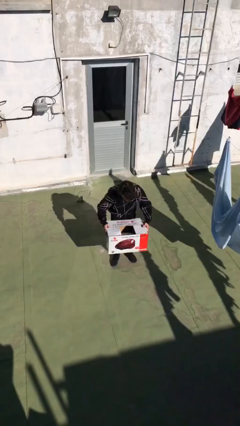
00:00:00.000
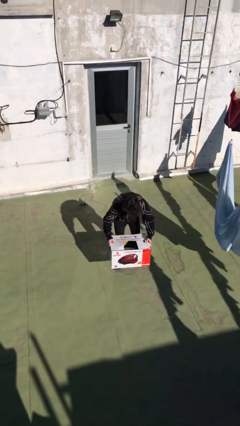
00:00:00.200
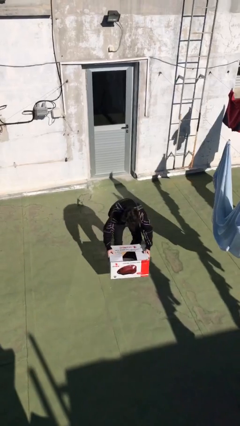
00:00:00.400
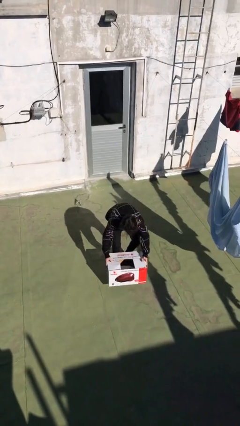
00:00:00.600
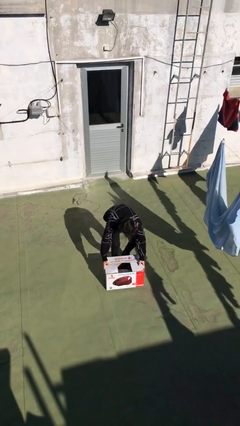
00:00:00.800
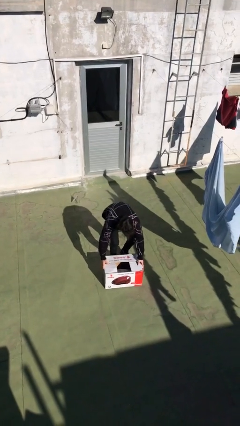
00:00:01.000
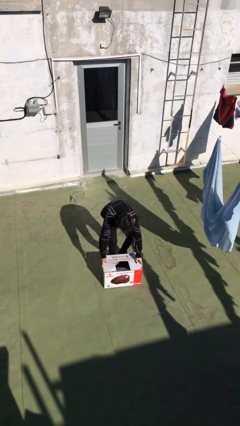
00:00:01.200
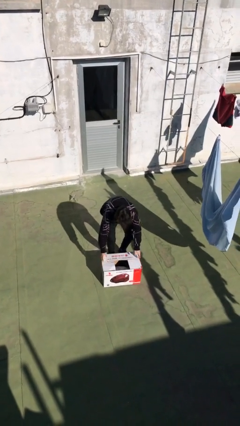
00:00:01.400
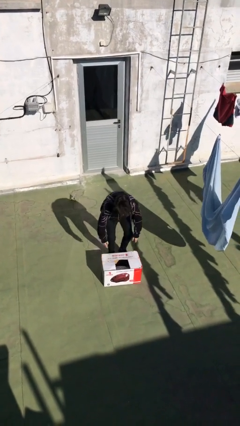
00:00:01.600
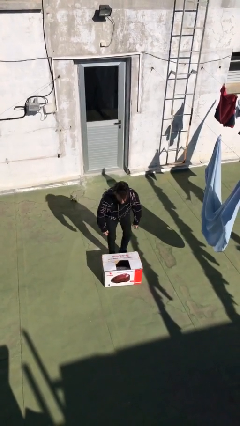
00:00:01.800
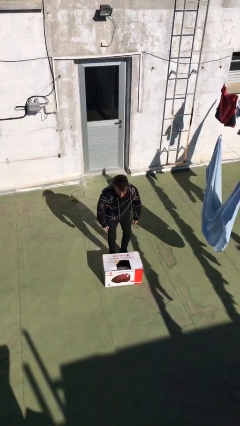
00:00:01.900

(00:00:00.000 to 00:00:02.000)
person puts down object on floor

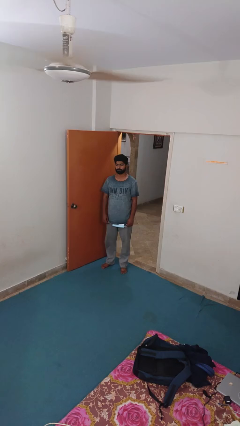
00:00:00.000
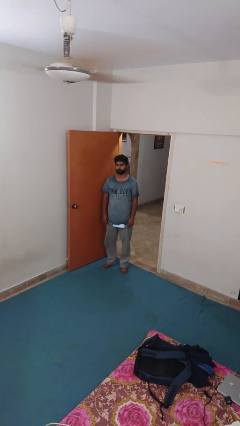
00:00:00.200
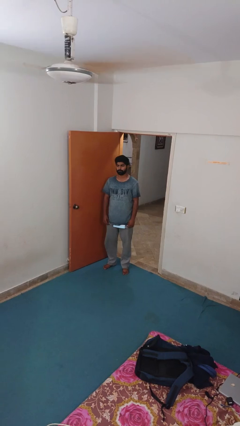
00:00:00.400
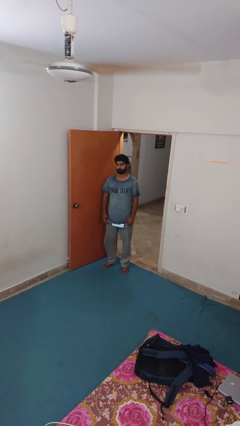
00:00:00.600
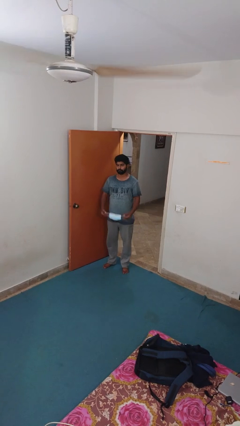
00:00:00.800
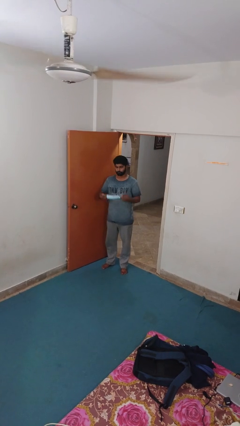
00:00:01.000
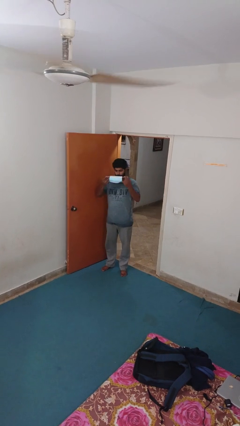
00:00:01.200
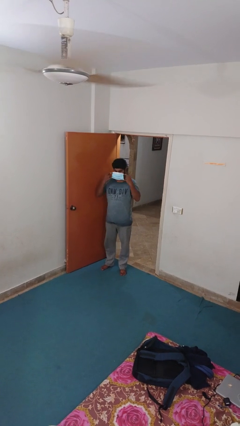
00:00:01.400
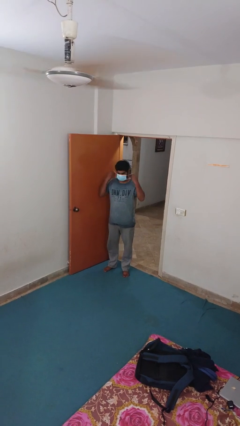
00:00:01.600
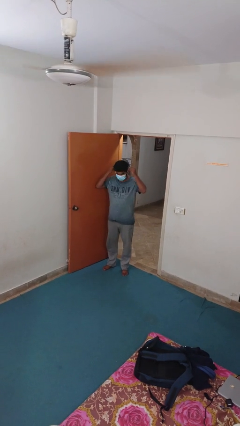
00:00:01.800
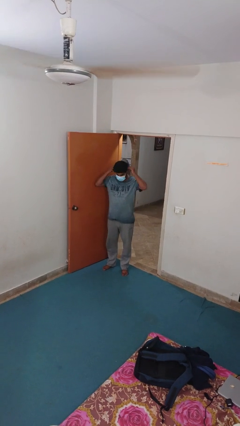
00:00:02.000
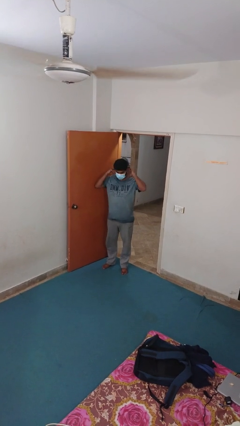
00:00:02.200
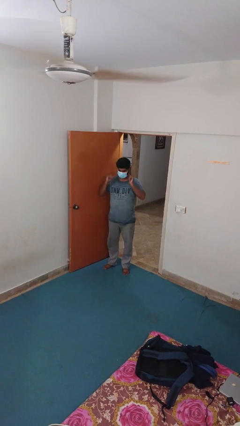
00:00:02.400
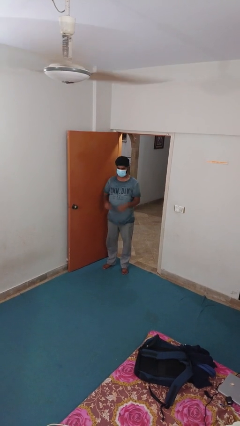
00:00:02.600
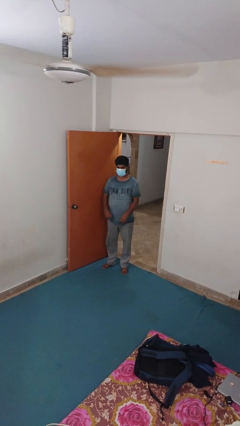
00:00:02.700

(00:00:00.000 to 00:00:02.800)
person puts on facemask

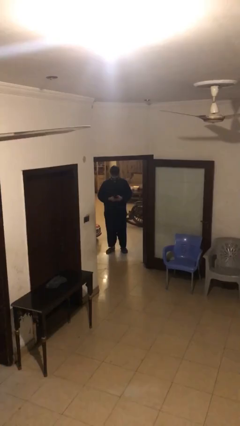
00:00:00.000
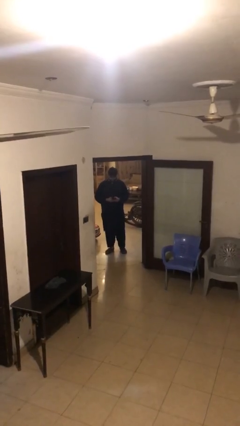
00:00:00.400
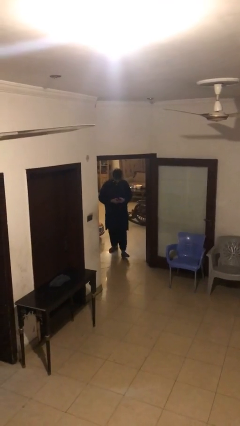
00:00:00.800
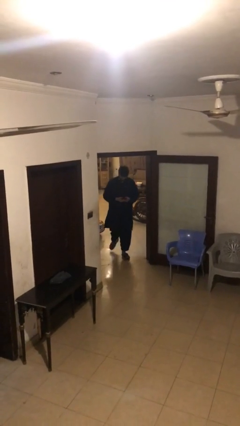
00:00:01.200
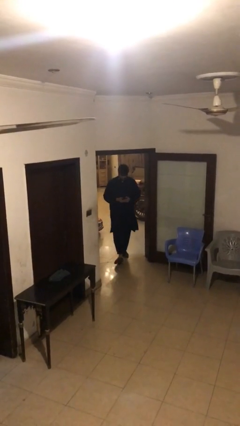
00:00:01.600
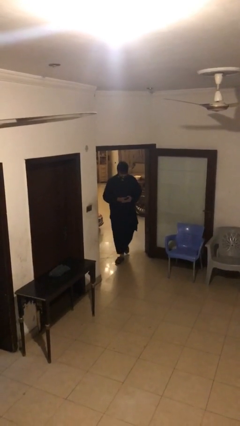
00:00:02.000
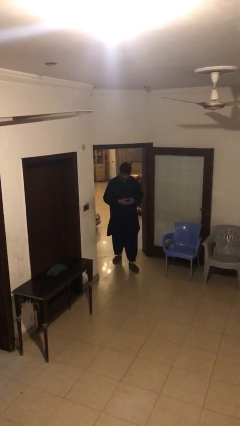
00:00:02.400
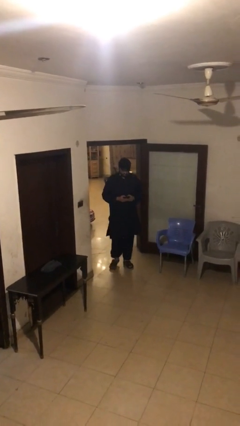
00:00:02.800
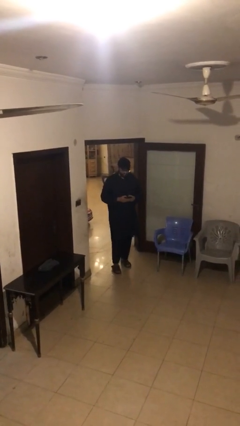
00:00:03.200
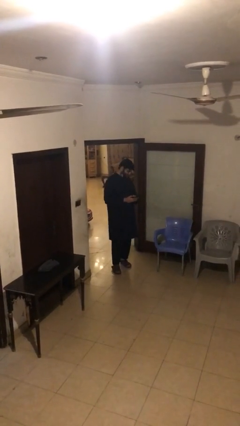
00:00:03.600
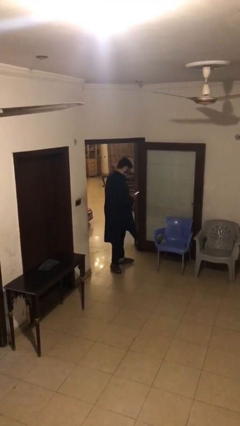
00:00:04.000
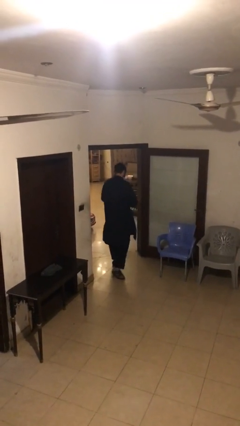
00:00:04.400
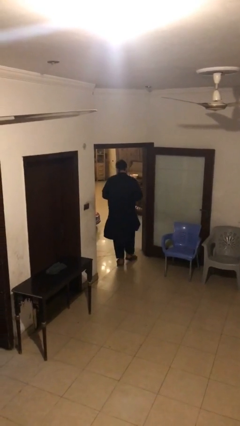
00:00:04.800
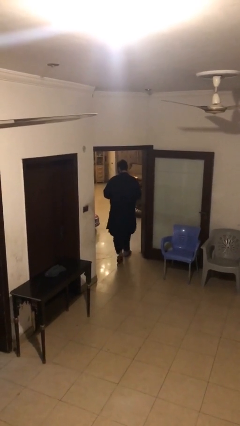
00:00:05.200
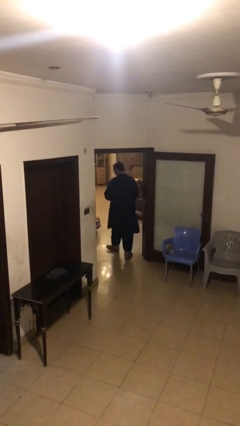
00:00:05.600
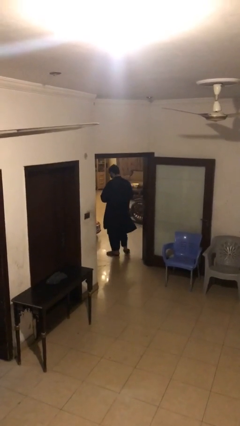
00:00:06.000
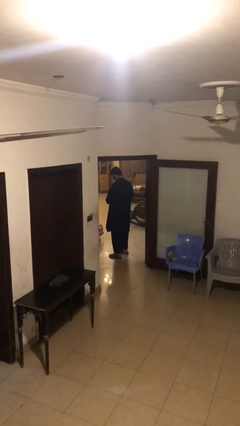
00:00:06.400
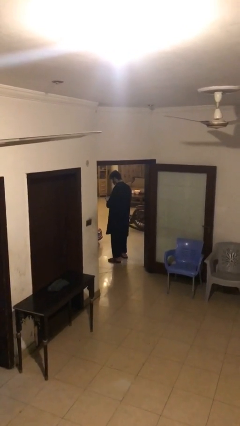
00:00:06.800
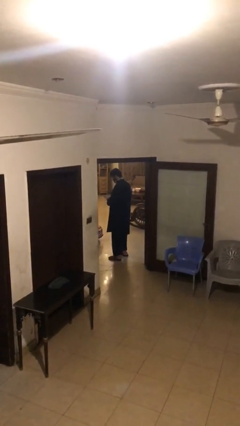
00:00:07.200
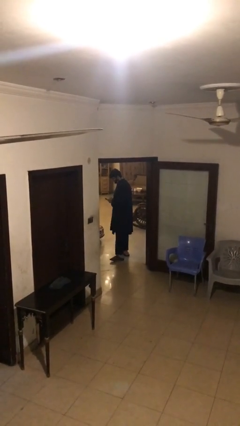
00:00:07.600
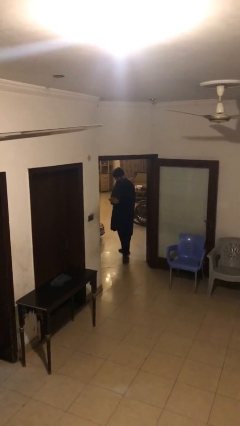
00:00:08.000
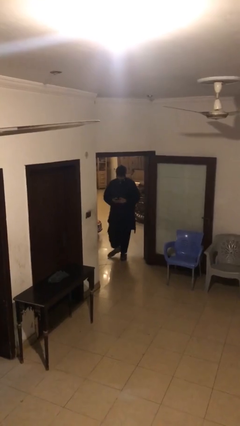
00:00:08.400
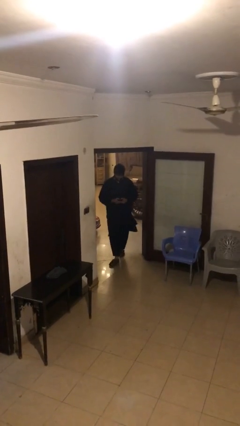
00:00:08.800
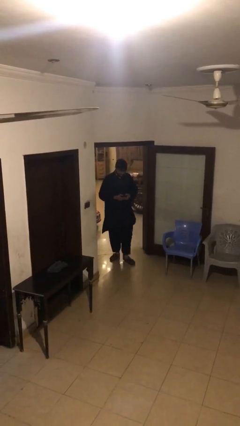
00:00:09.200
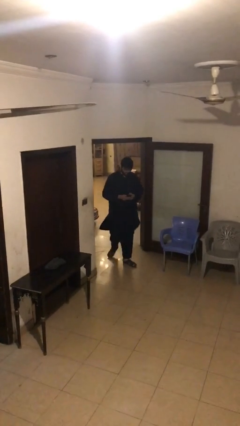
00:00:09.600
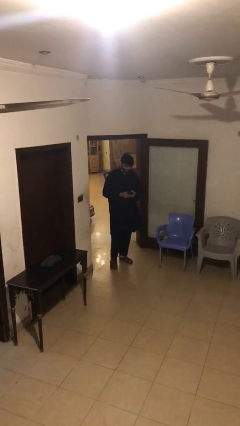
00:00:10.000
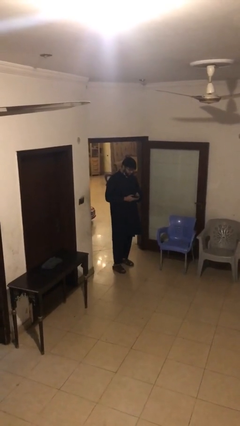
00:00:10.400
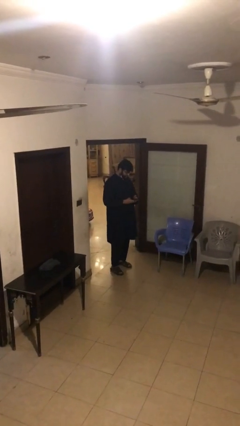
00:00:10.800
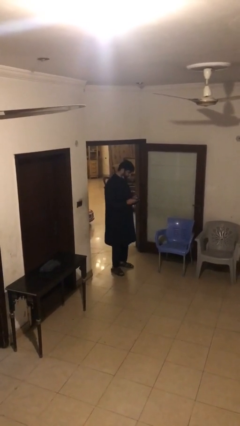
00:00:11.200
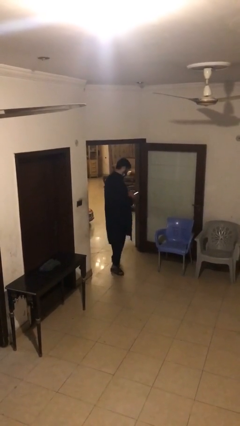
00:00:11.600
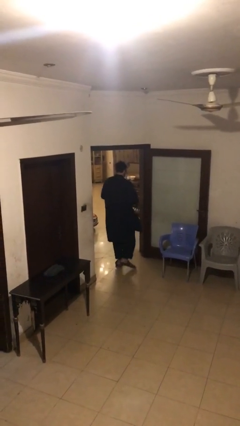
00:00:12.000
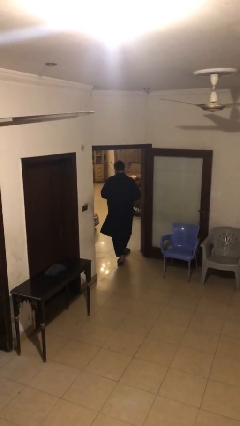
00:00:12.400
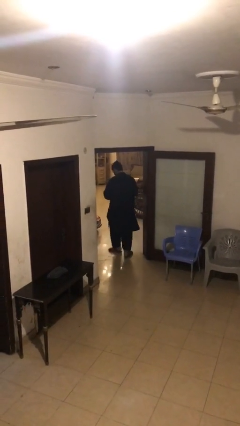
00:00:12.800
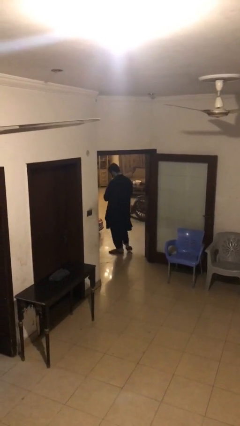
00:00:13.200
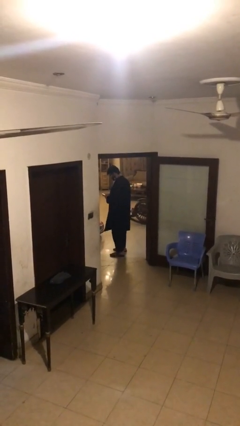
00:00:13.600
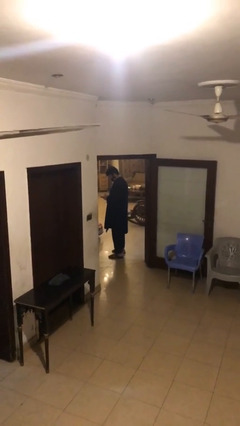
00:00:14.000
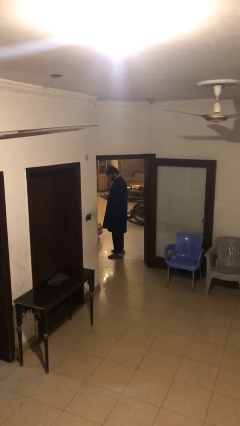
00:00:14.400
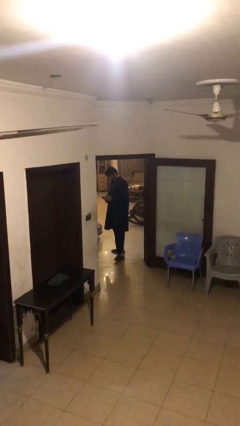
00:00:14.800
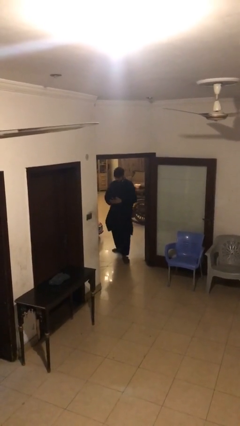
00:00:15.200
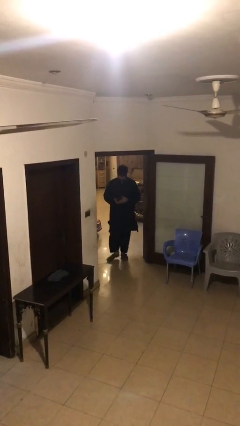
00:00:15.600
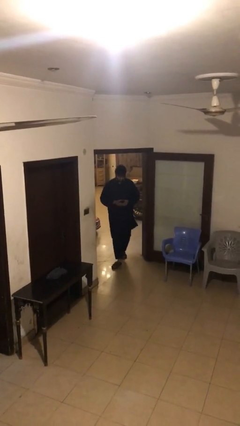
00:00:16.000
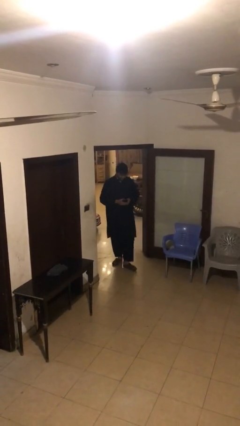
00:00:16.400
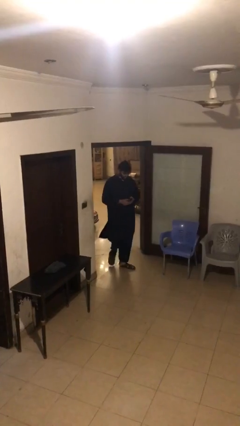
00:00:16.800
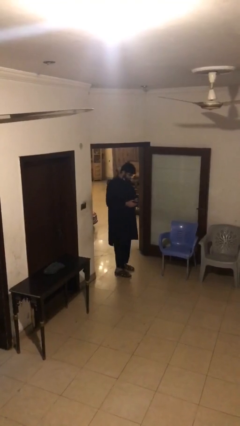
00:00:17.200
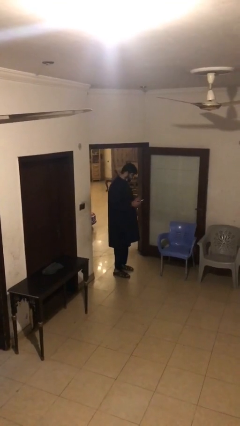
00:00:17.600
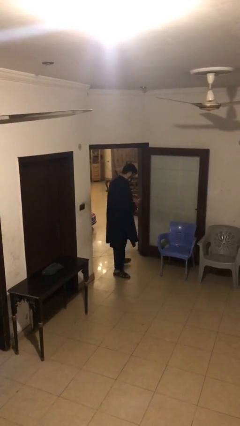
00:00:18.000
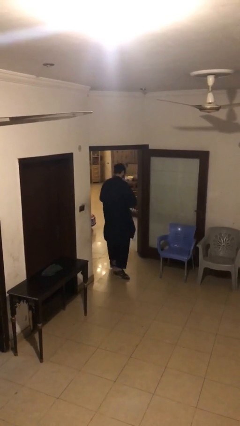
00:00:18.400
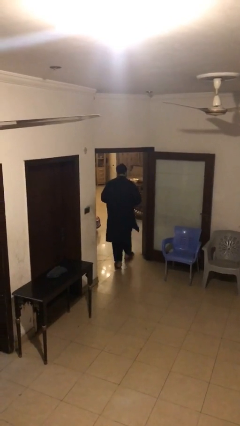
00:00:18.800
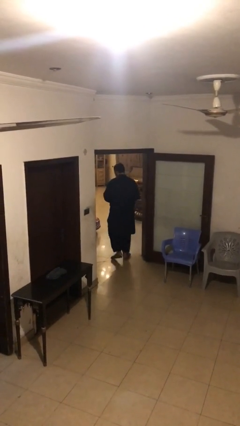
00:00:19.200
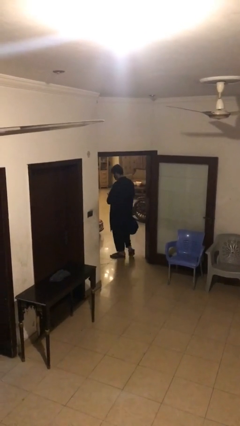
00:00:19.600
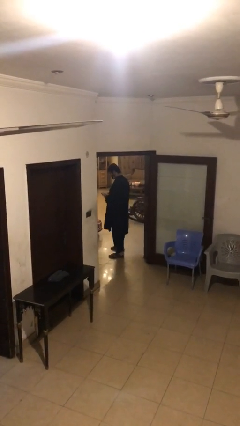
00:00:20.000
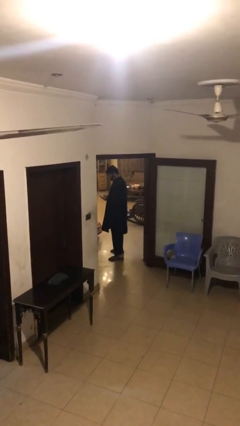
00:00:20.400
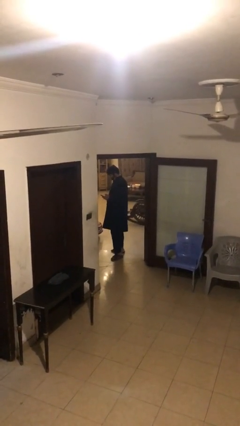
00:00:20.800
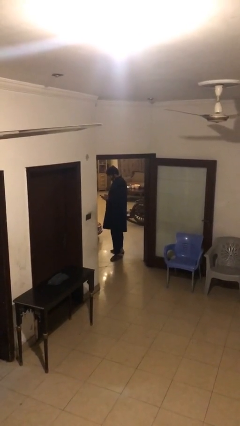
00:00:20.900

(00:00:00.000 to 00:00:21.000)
person texts on phone

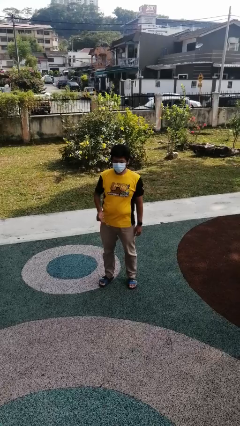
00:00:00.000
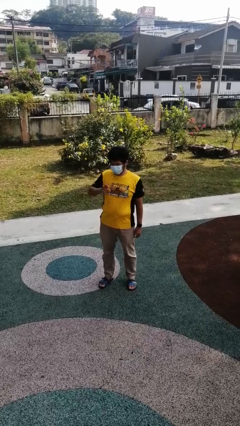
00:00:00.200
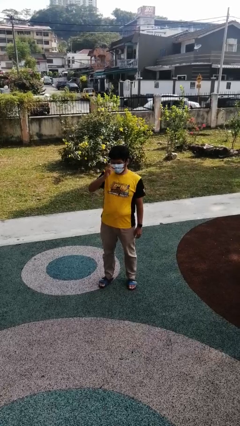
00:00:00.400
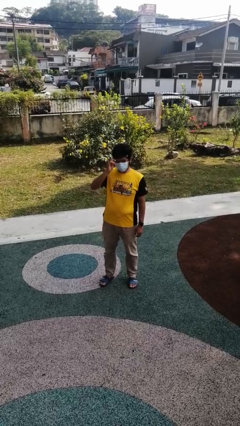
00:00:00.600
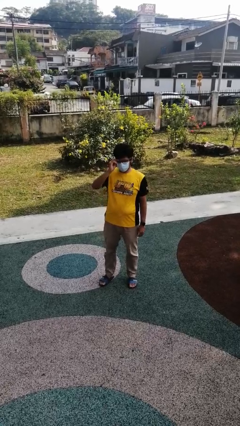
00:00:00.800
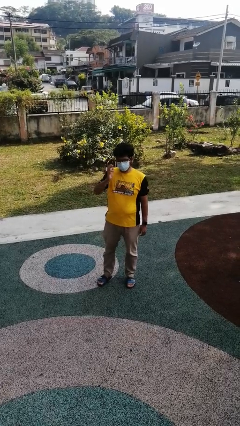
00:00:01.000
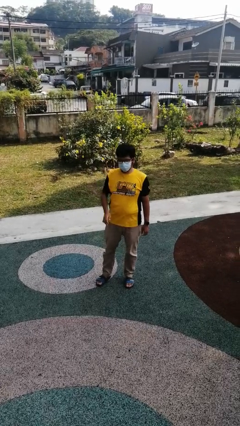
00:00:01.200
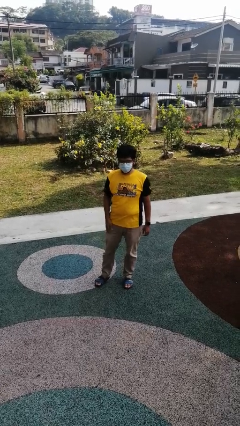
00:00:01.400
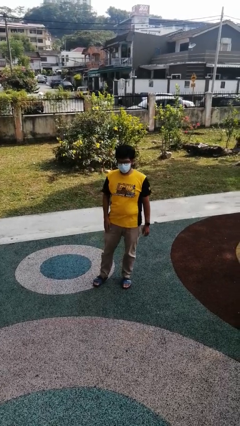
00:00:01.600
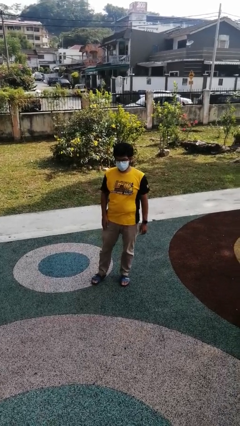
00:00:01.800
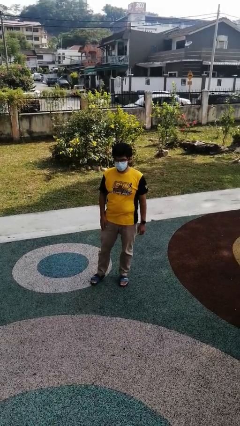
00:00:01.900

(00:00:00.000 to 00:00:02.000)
person puts on glasses

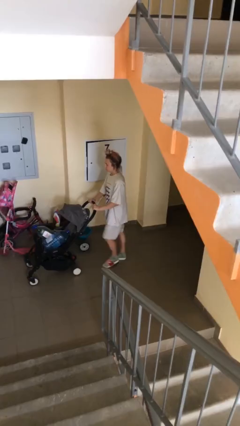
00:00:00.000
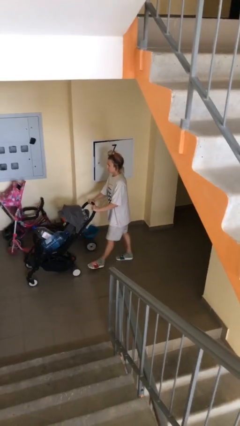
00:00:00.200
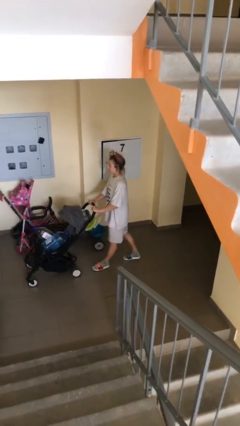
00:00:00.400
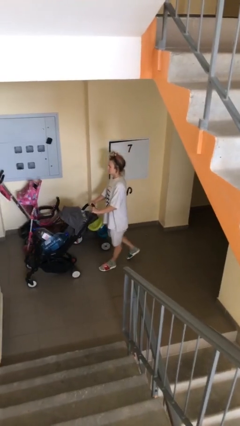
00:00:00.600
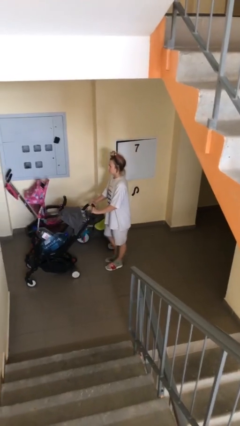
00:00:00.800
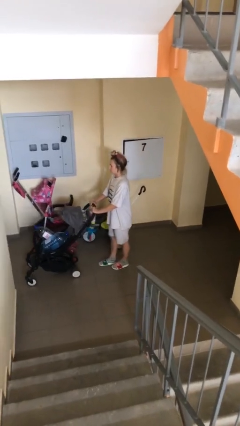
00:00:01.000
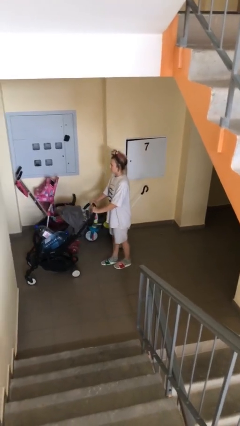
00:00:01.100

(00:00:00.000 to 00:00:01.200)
person pushes wheeled cart
